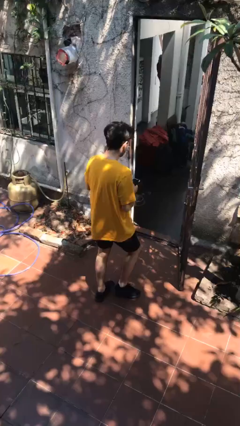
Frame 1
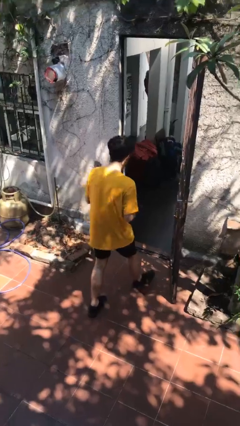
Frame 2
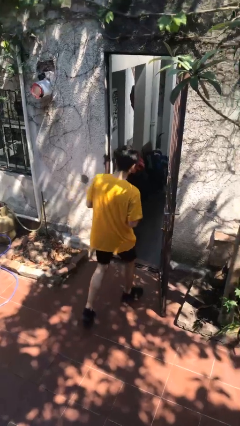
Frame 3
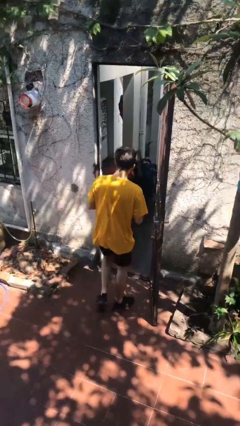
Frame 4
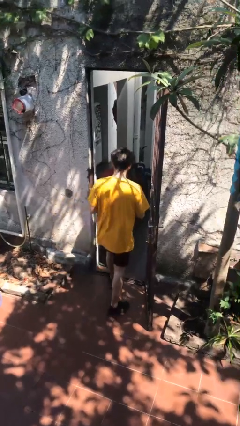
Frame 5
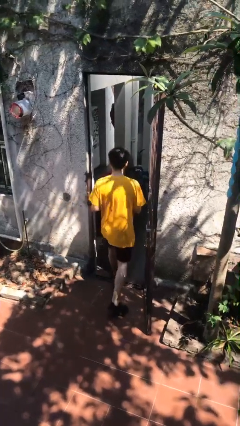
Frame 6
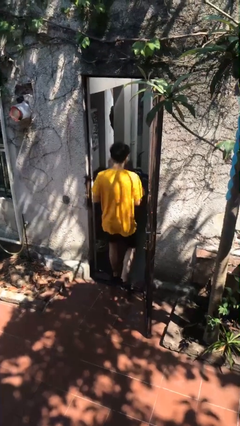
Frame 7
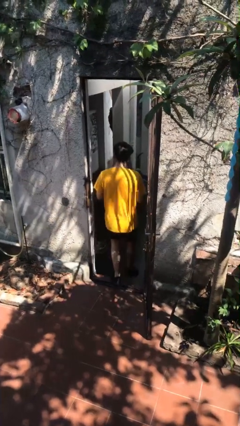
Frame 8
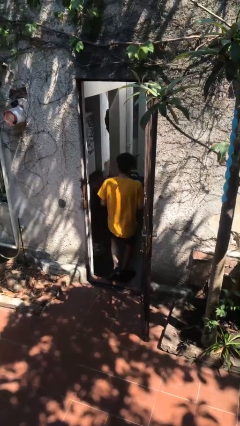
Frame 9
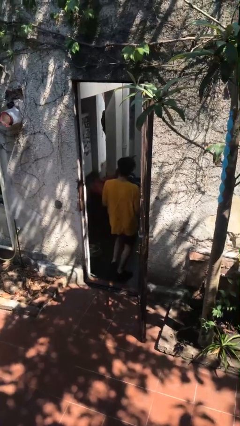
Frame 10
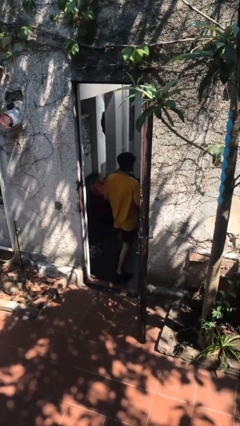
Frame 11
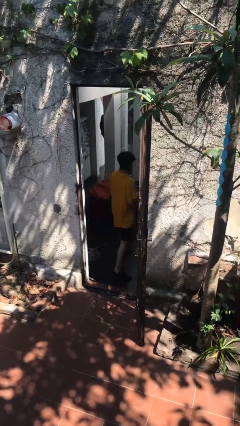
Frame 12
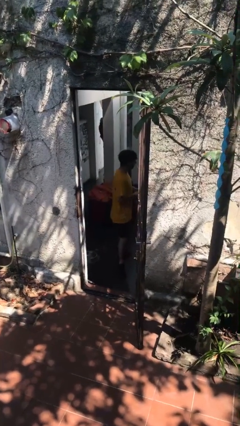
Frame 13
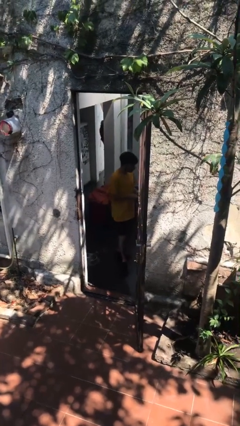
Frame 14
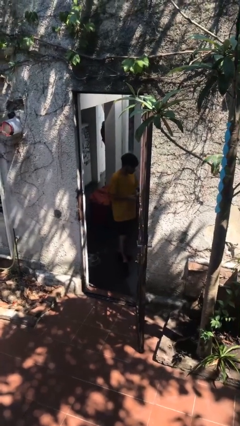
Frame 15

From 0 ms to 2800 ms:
person exits scene through structure

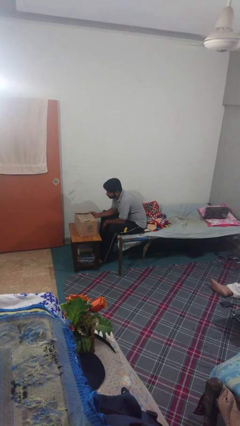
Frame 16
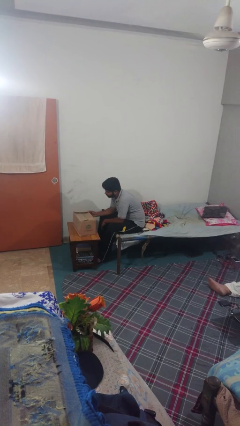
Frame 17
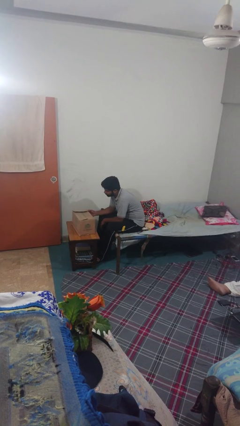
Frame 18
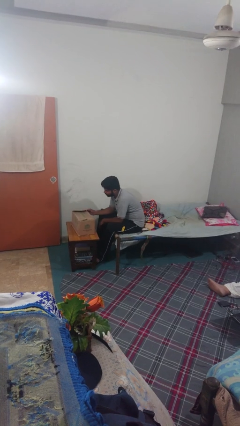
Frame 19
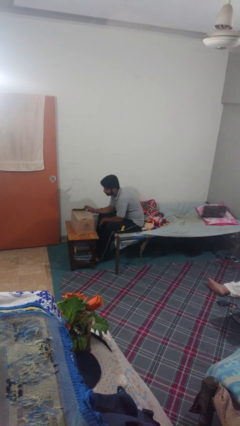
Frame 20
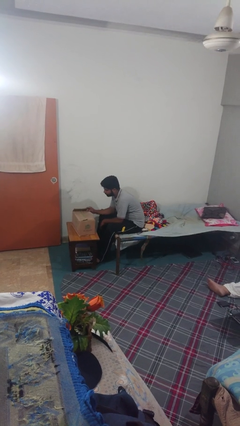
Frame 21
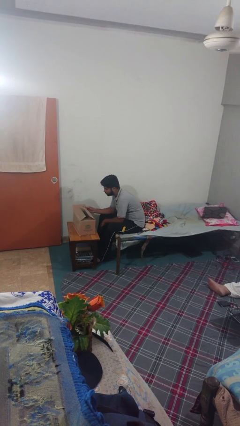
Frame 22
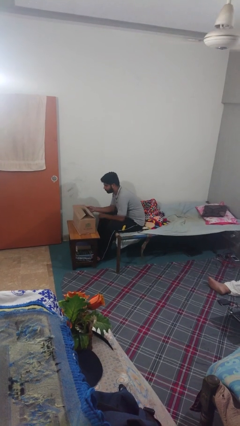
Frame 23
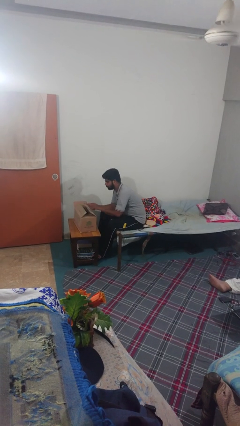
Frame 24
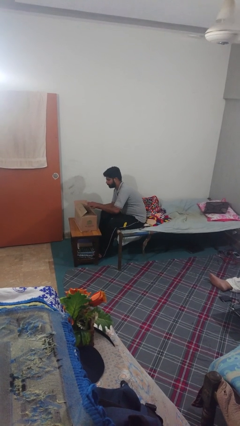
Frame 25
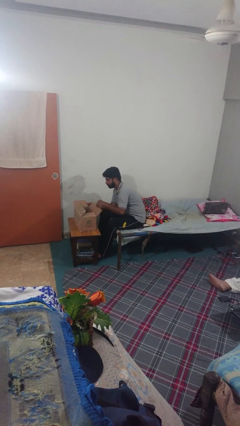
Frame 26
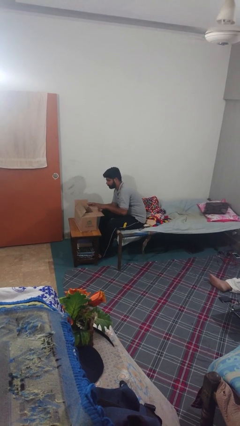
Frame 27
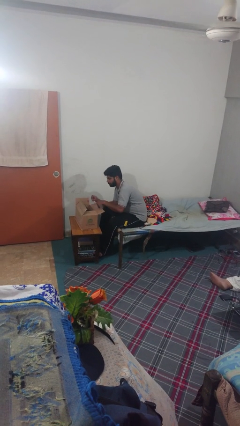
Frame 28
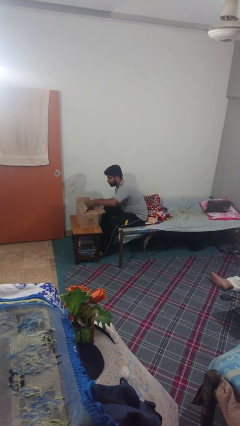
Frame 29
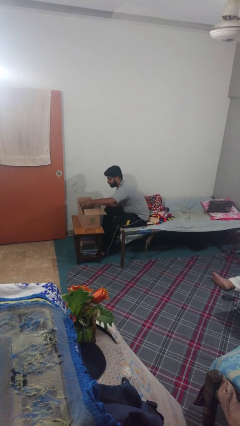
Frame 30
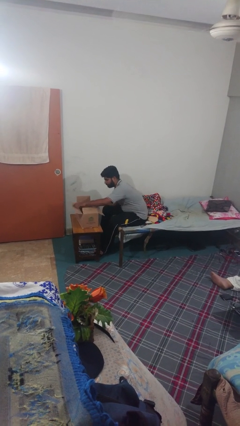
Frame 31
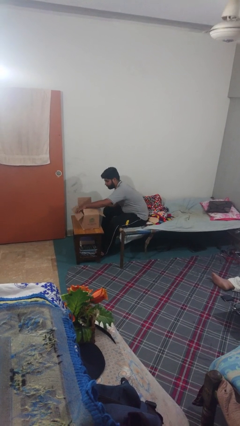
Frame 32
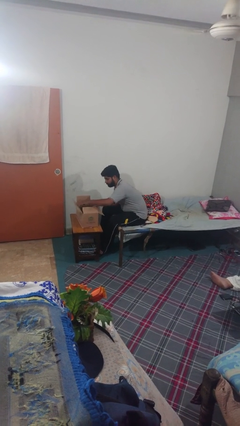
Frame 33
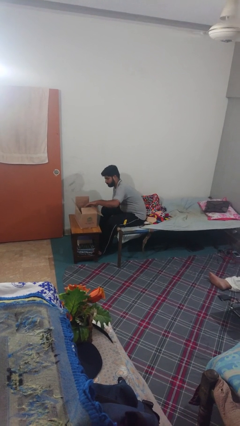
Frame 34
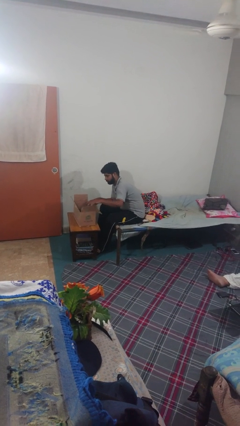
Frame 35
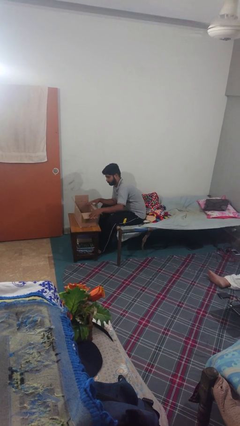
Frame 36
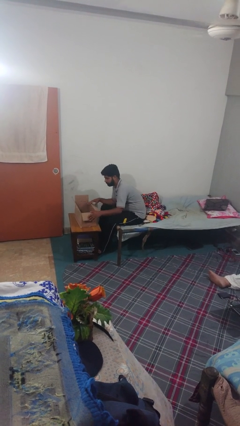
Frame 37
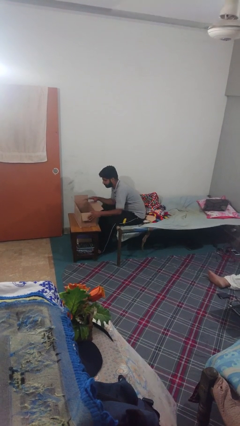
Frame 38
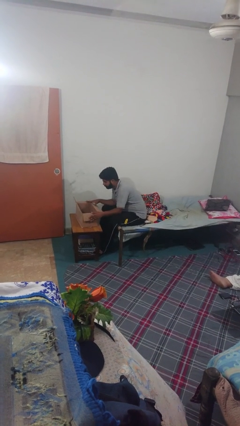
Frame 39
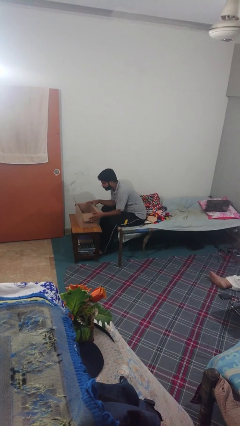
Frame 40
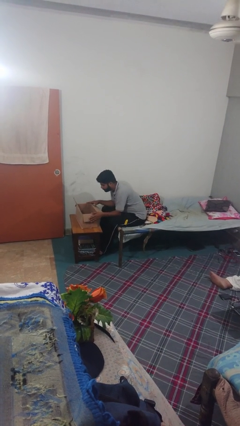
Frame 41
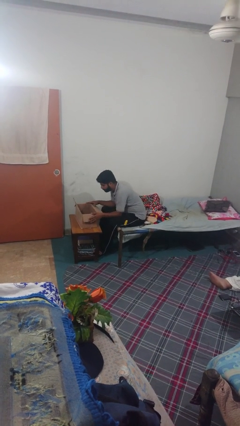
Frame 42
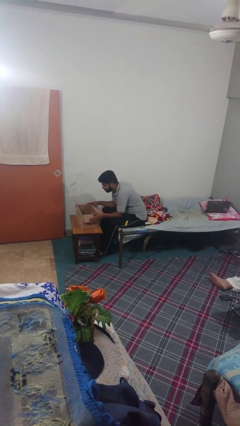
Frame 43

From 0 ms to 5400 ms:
person opens box

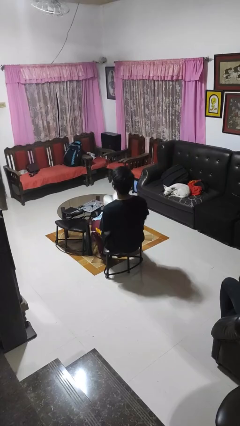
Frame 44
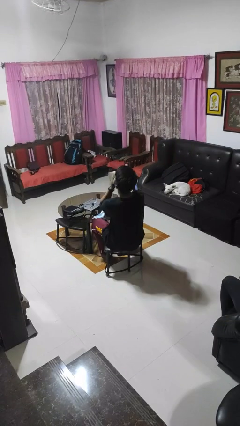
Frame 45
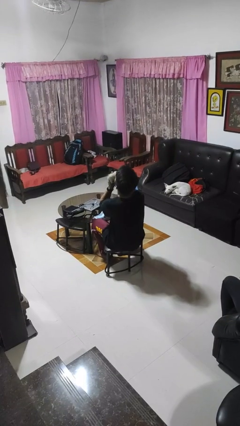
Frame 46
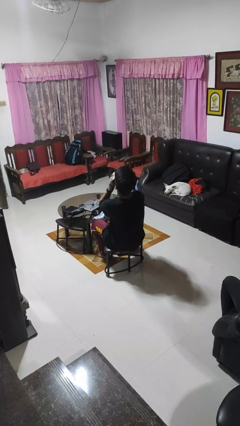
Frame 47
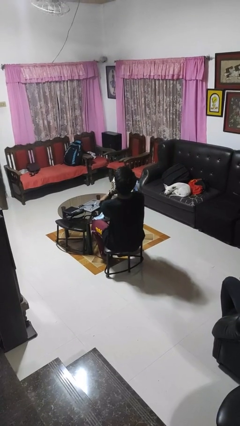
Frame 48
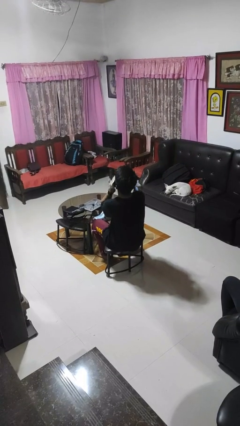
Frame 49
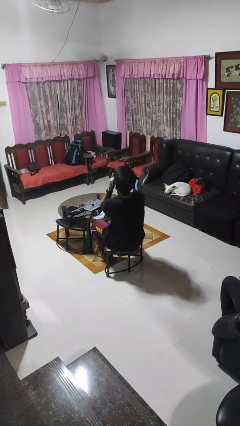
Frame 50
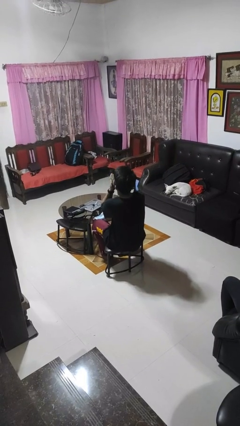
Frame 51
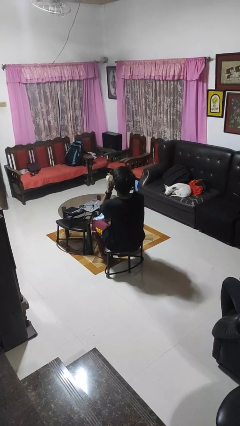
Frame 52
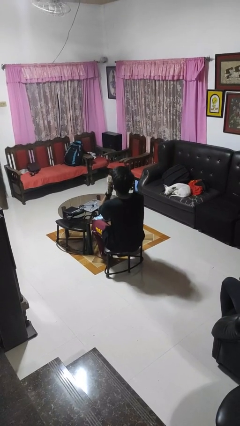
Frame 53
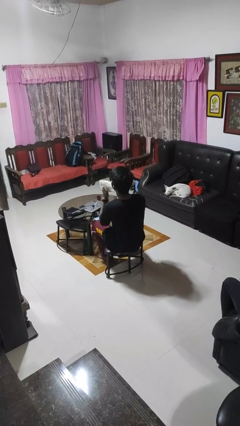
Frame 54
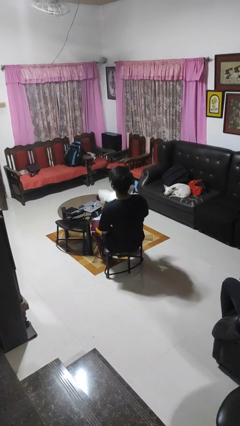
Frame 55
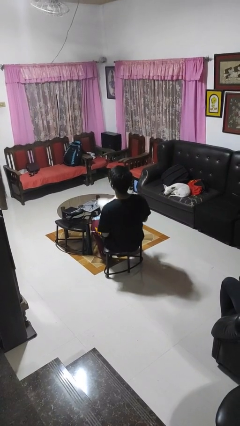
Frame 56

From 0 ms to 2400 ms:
person wipes mouth with napkin

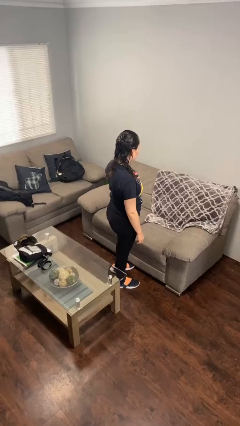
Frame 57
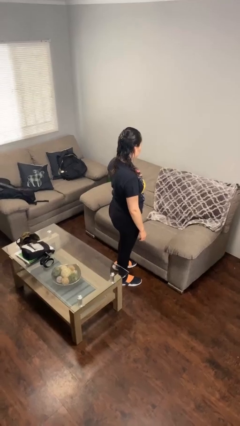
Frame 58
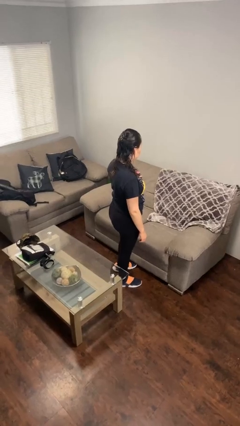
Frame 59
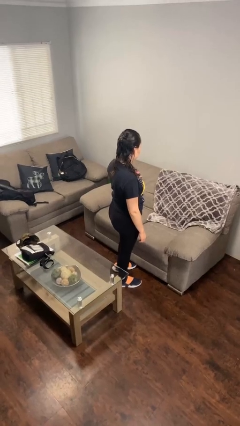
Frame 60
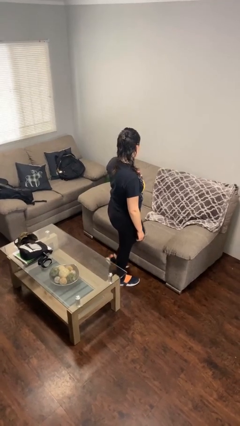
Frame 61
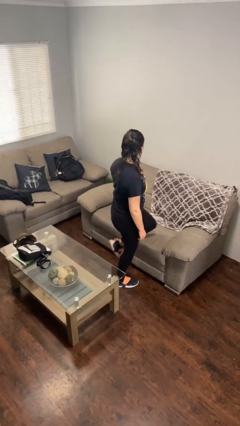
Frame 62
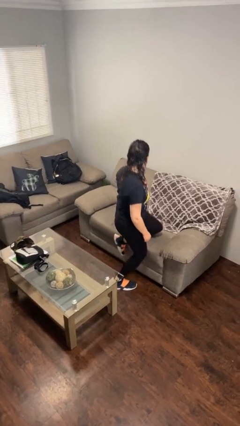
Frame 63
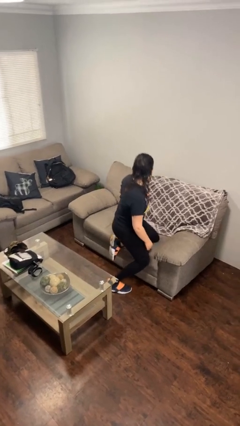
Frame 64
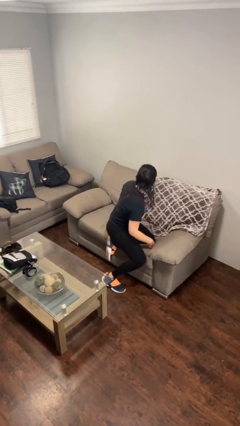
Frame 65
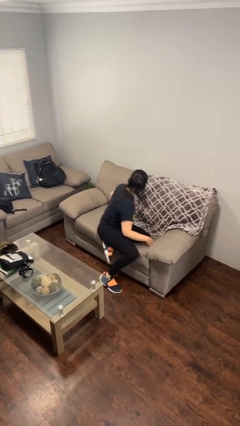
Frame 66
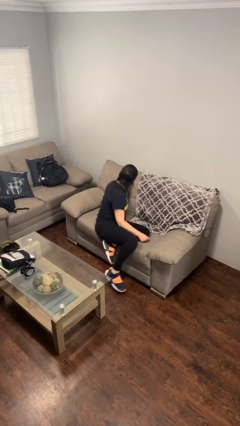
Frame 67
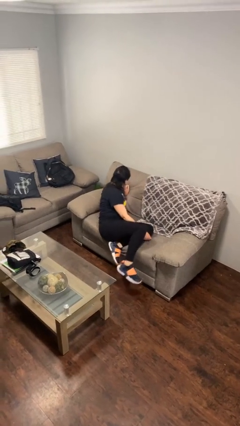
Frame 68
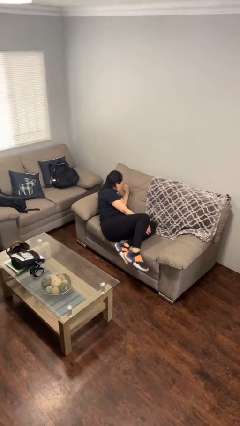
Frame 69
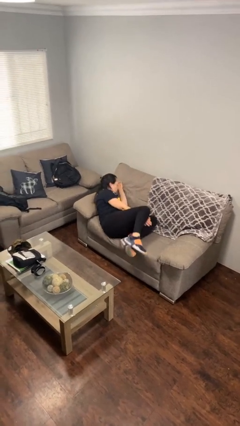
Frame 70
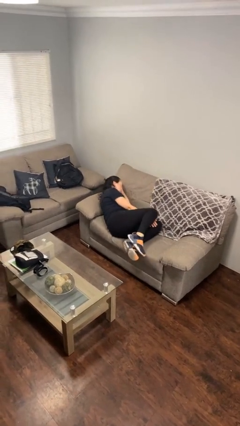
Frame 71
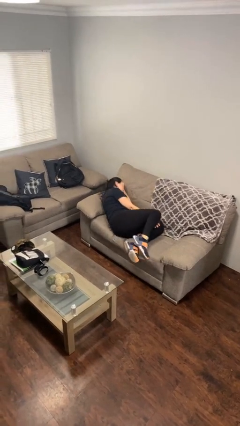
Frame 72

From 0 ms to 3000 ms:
person lies down on couch

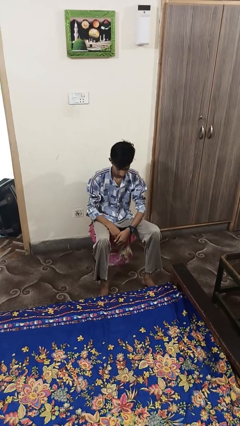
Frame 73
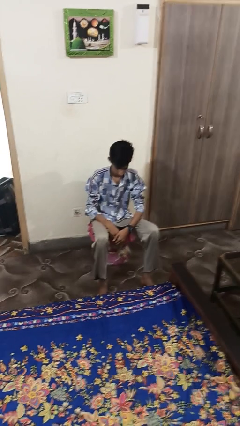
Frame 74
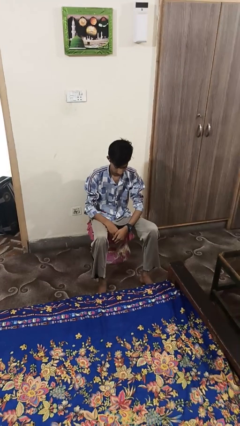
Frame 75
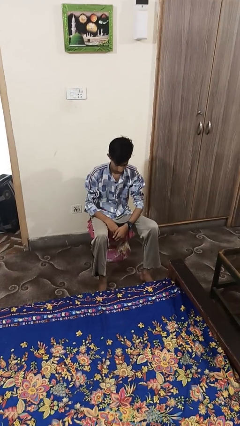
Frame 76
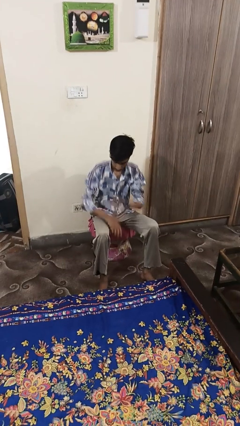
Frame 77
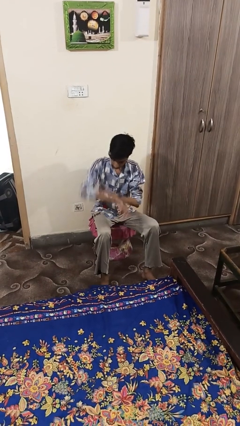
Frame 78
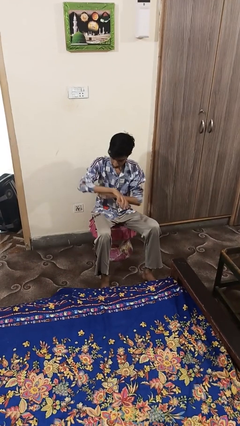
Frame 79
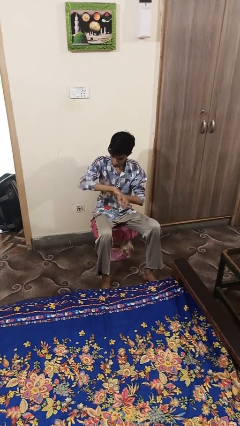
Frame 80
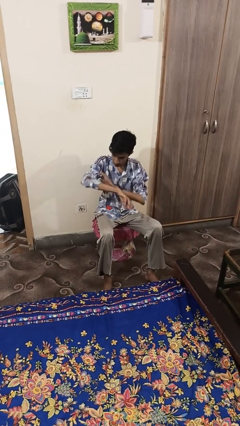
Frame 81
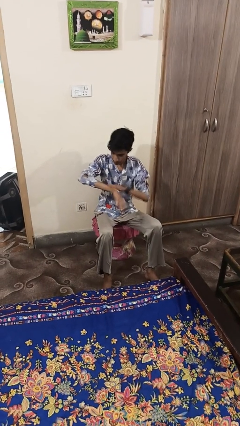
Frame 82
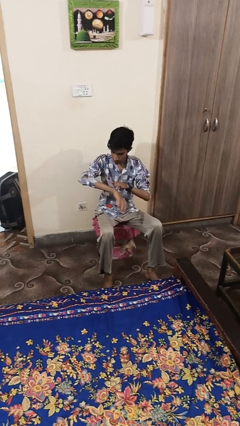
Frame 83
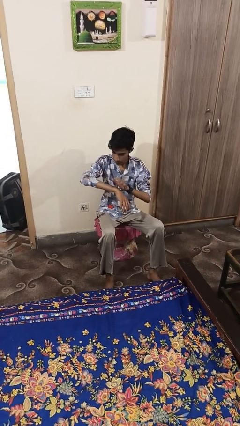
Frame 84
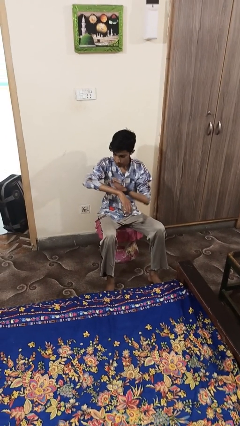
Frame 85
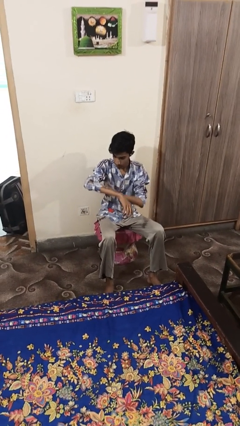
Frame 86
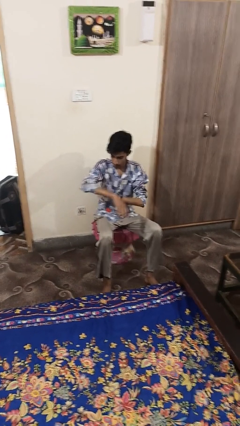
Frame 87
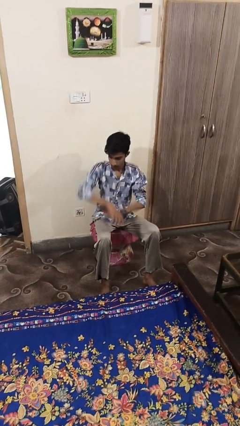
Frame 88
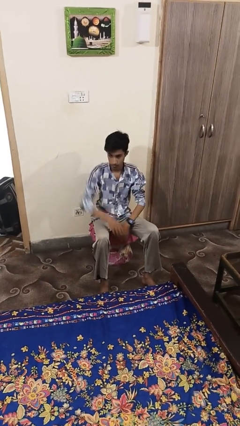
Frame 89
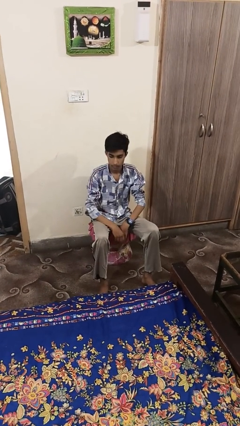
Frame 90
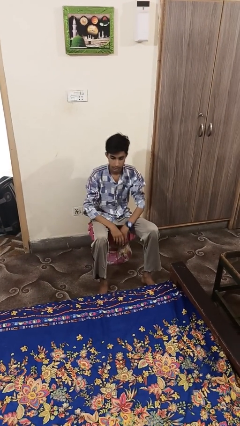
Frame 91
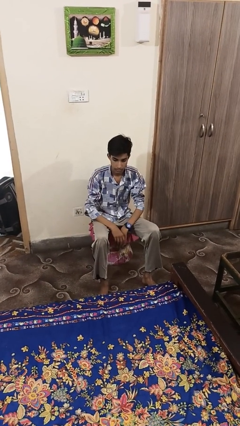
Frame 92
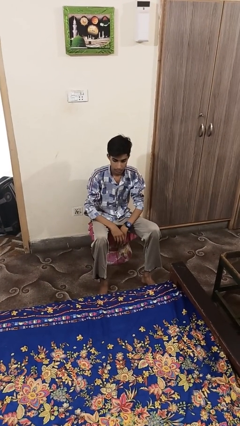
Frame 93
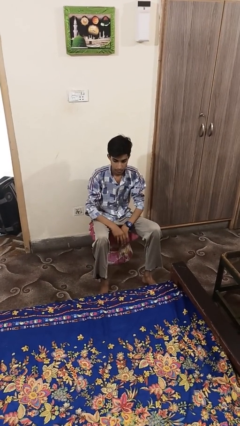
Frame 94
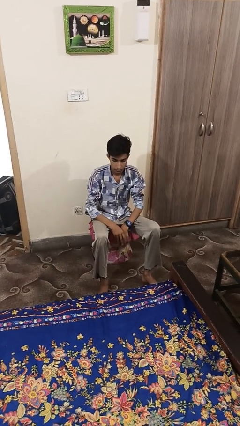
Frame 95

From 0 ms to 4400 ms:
person swats bug
